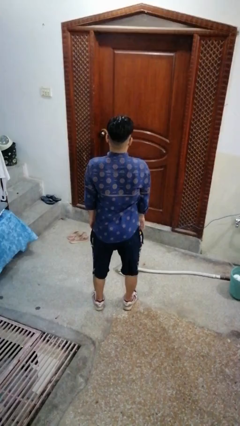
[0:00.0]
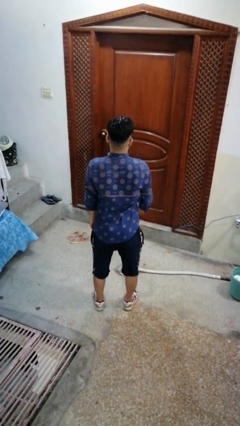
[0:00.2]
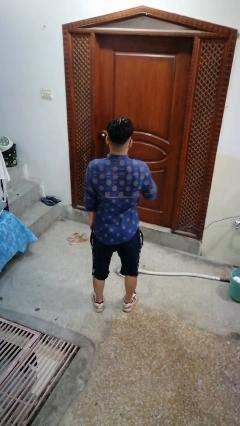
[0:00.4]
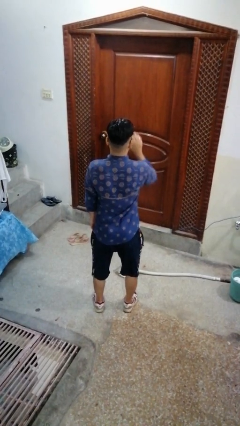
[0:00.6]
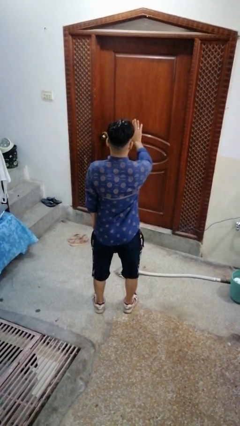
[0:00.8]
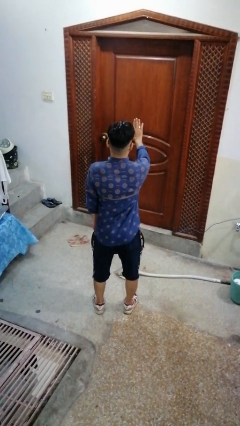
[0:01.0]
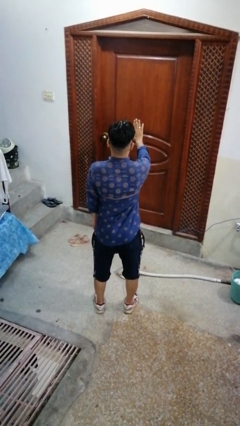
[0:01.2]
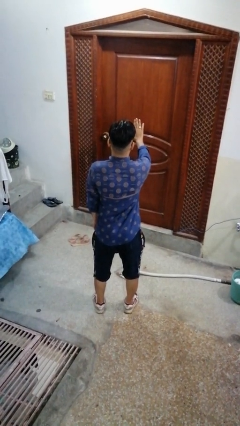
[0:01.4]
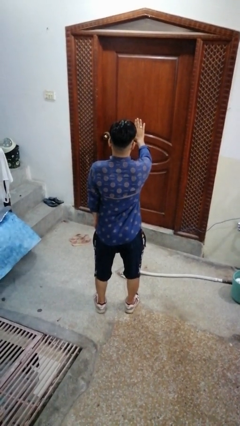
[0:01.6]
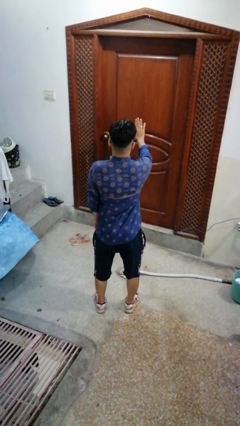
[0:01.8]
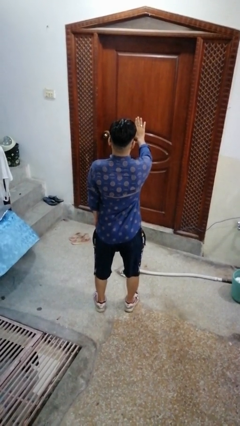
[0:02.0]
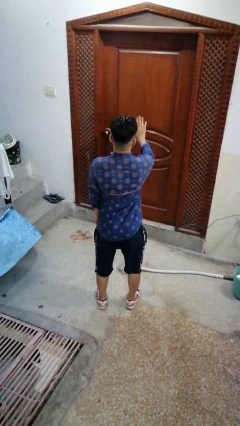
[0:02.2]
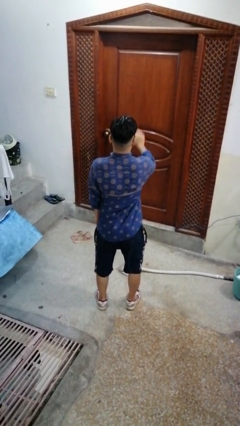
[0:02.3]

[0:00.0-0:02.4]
person gestures stop

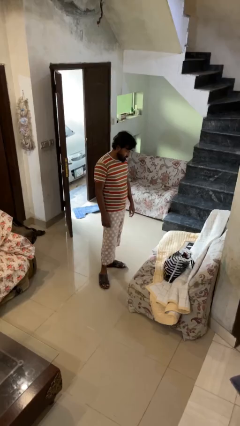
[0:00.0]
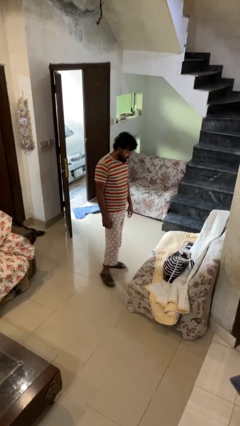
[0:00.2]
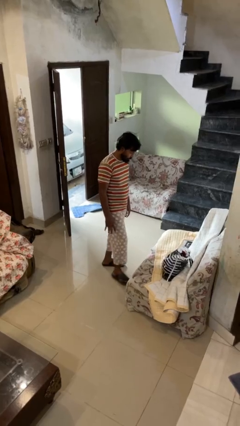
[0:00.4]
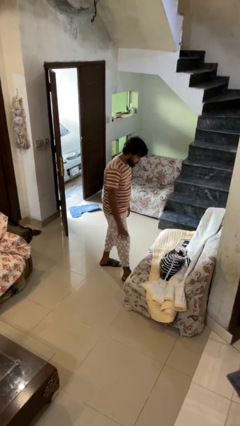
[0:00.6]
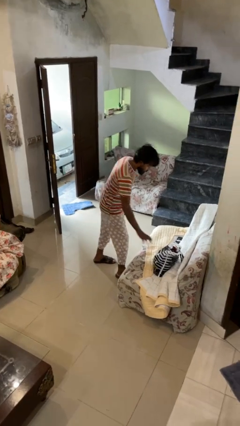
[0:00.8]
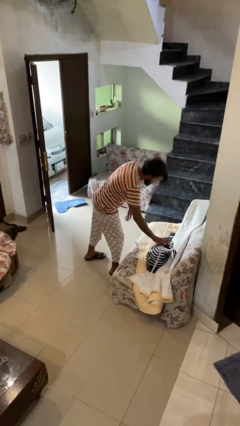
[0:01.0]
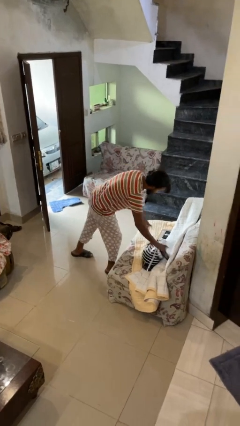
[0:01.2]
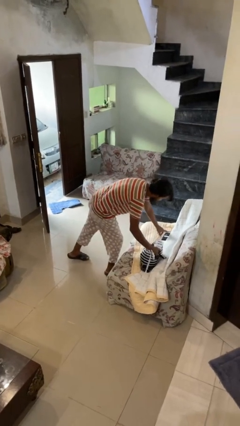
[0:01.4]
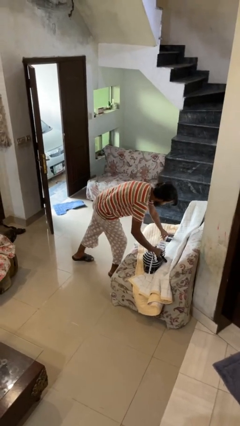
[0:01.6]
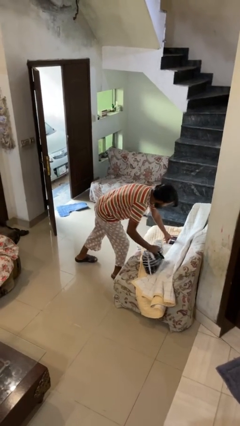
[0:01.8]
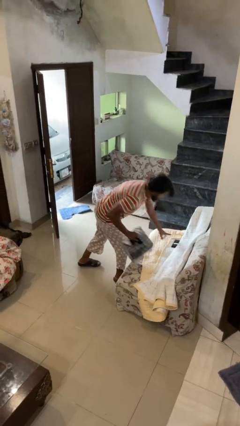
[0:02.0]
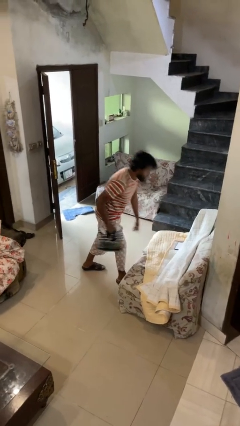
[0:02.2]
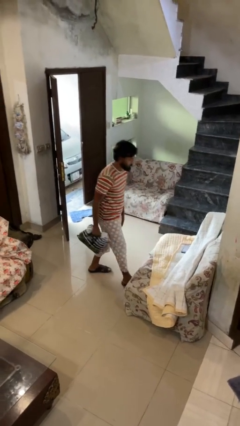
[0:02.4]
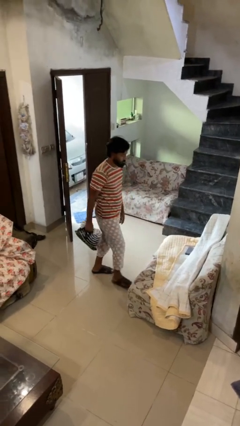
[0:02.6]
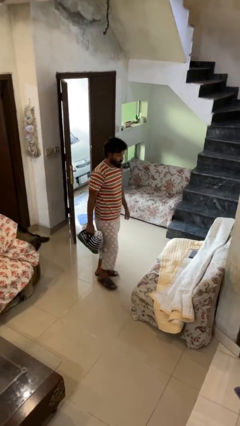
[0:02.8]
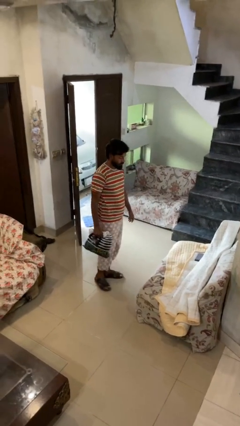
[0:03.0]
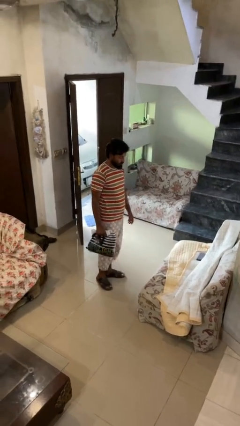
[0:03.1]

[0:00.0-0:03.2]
person picks up object from couch

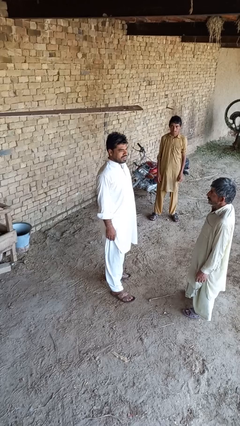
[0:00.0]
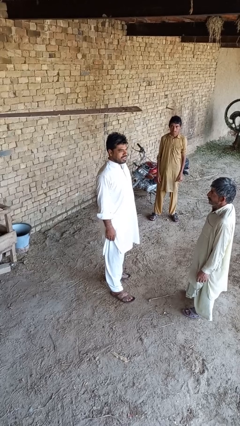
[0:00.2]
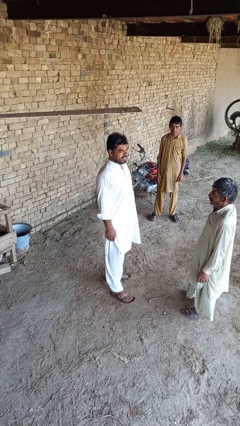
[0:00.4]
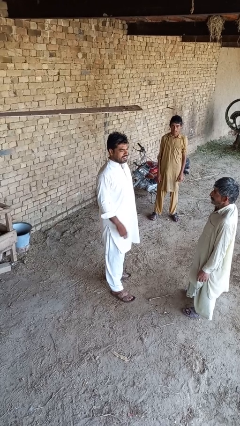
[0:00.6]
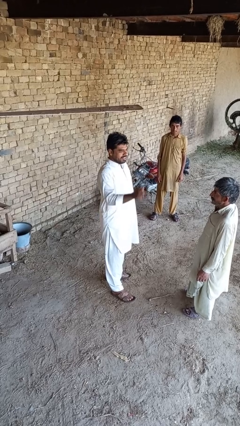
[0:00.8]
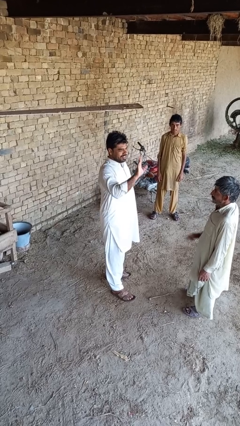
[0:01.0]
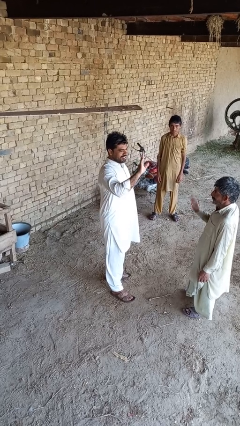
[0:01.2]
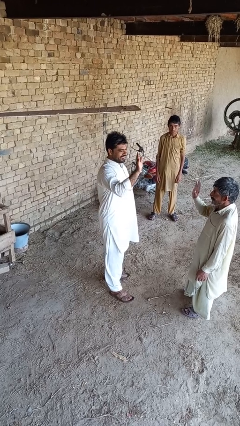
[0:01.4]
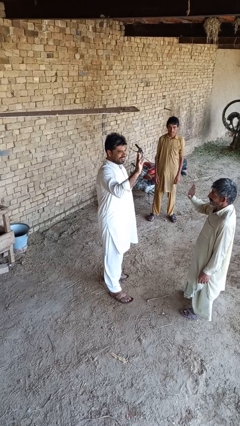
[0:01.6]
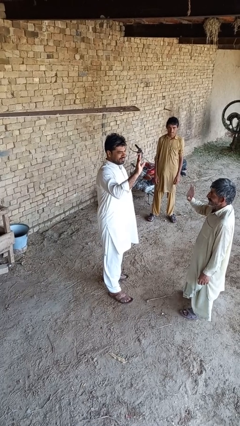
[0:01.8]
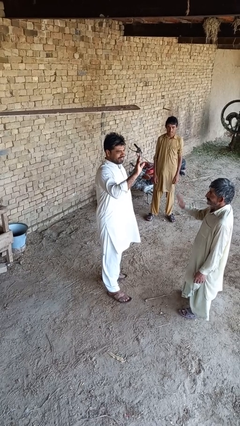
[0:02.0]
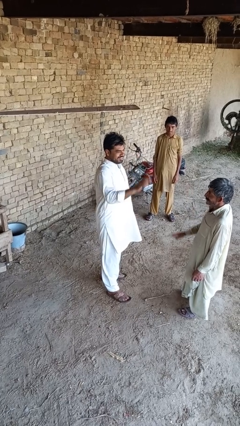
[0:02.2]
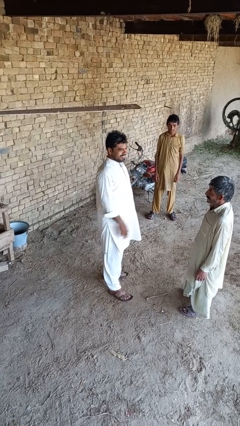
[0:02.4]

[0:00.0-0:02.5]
person waves at person

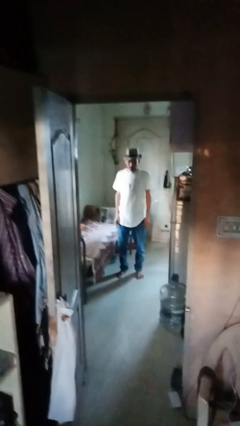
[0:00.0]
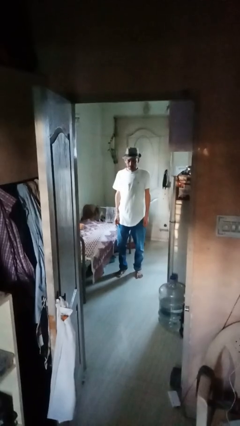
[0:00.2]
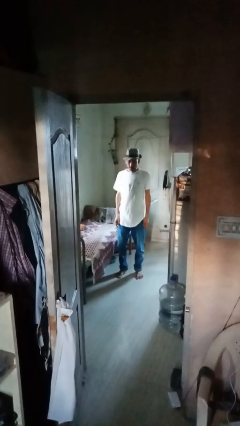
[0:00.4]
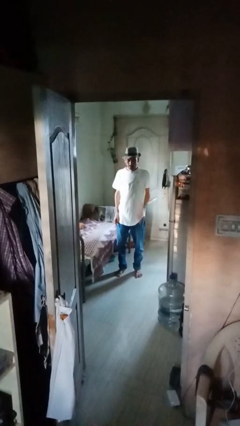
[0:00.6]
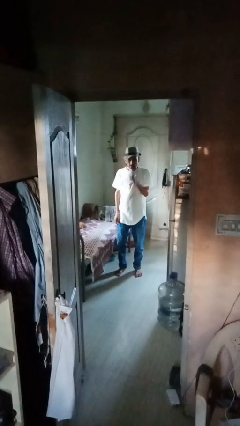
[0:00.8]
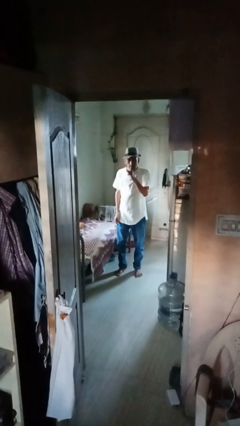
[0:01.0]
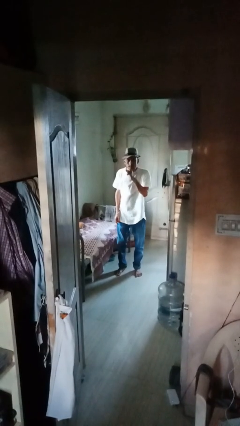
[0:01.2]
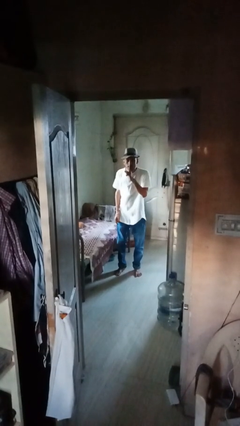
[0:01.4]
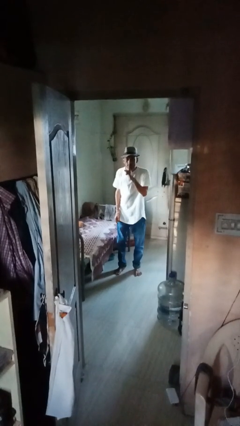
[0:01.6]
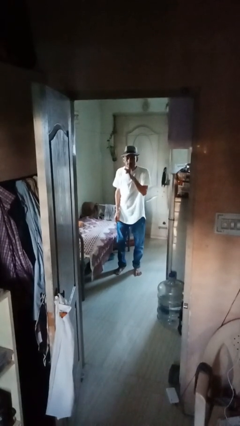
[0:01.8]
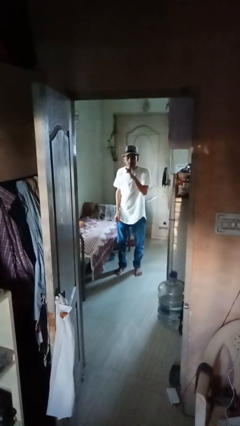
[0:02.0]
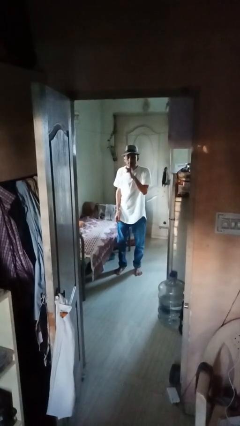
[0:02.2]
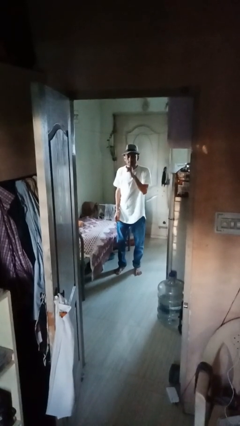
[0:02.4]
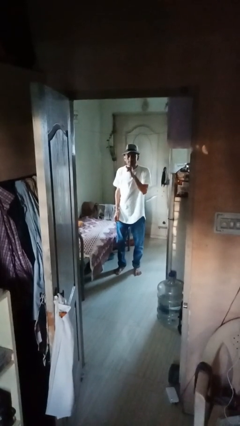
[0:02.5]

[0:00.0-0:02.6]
person gestures be quiet

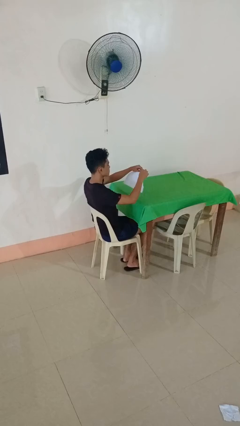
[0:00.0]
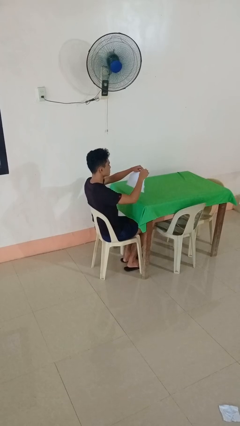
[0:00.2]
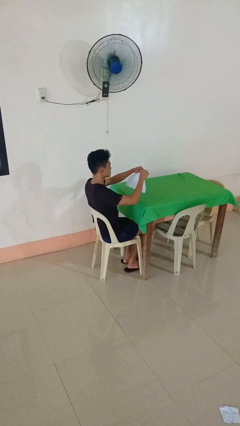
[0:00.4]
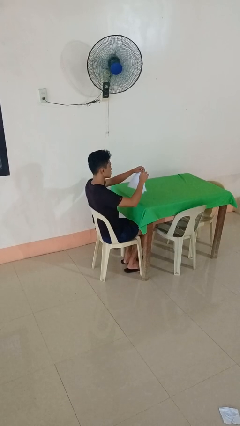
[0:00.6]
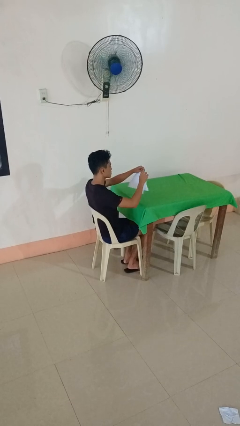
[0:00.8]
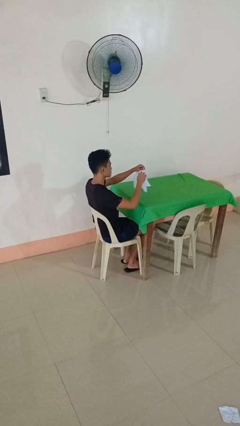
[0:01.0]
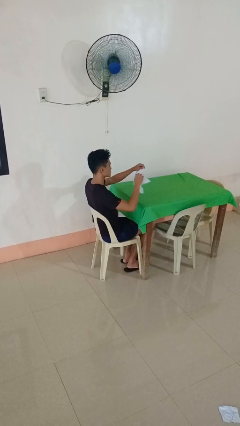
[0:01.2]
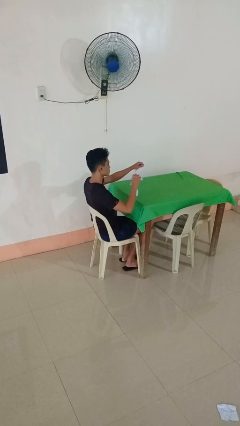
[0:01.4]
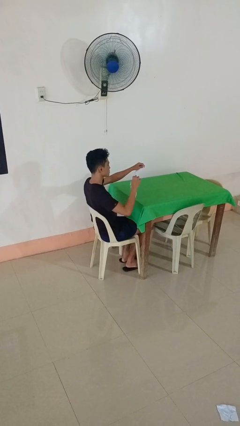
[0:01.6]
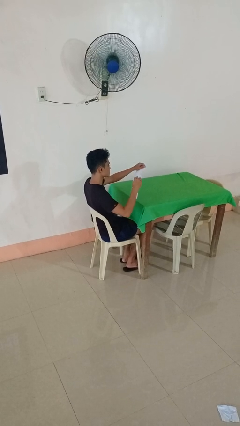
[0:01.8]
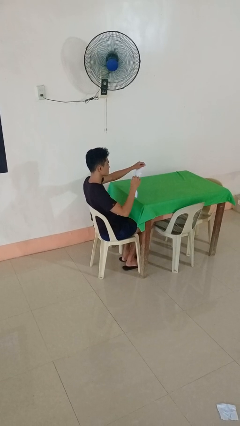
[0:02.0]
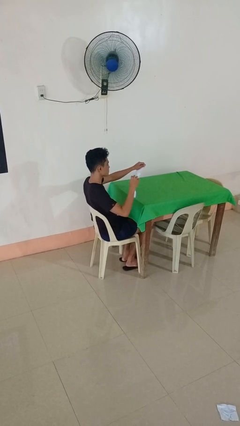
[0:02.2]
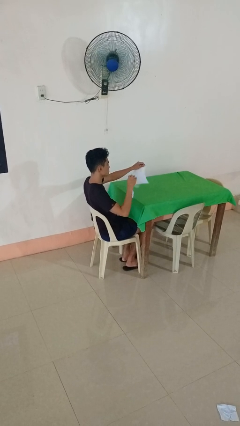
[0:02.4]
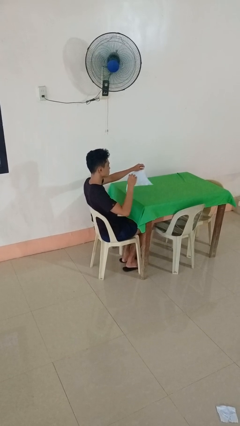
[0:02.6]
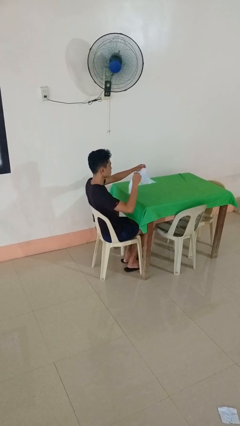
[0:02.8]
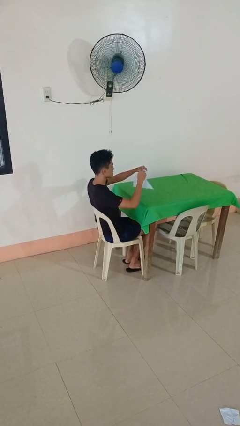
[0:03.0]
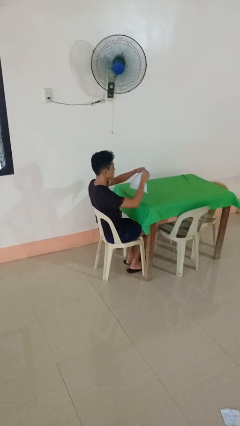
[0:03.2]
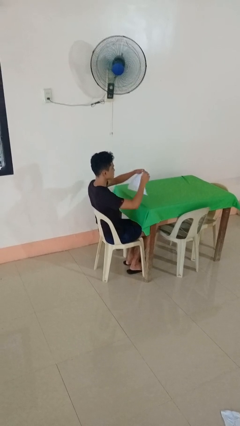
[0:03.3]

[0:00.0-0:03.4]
person tears paper

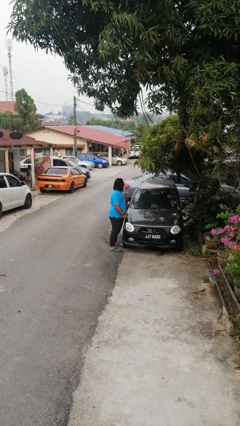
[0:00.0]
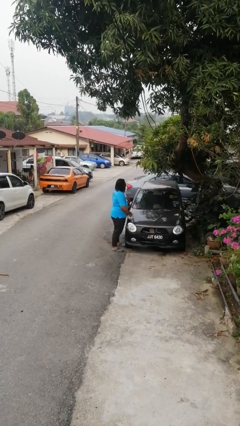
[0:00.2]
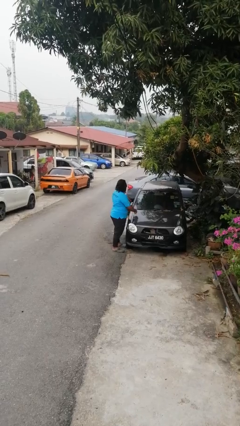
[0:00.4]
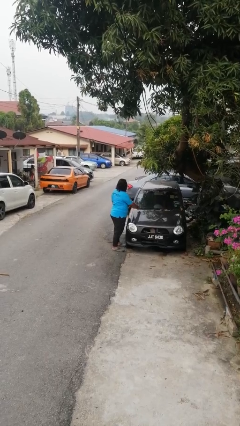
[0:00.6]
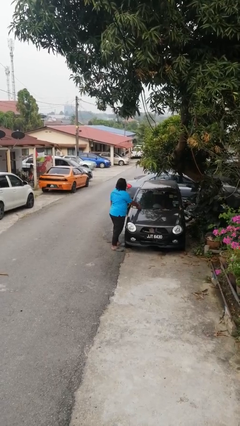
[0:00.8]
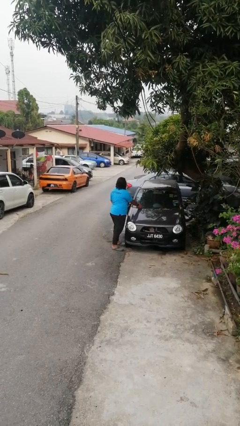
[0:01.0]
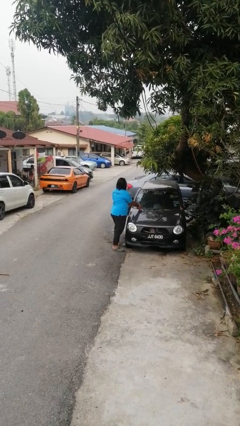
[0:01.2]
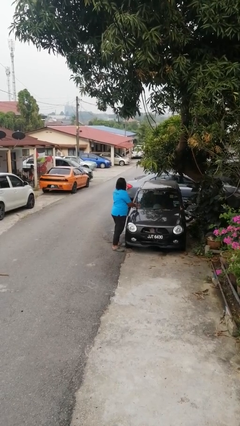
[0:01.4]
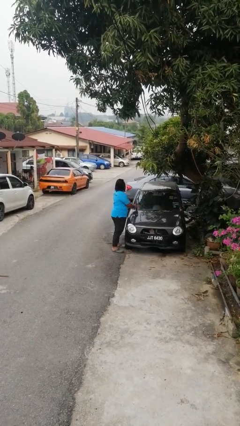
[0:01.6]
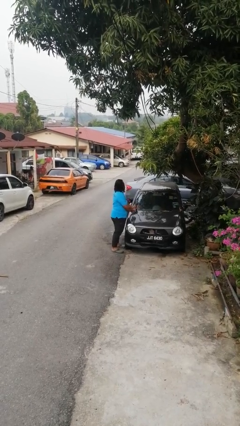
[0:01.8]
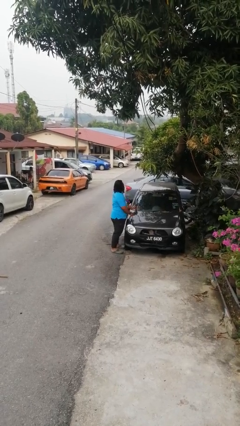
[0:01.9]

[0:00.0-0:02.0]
person flips up car wipers

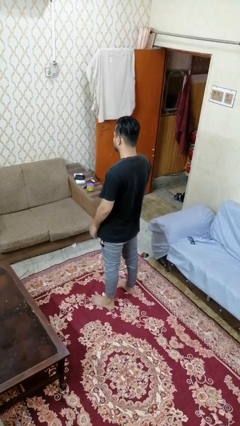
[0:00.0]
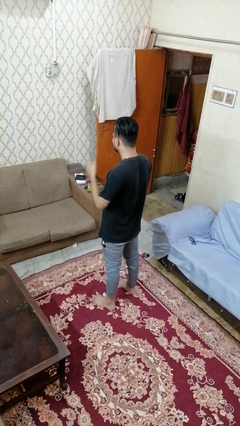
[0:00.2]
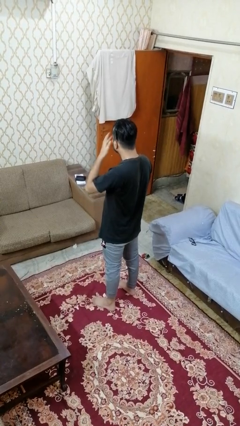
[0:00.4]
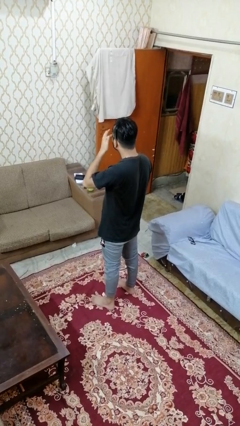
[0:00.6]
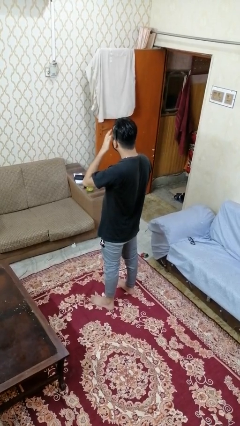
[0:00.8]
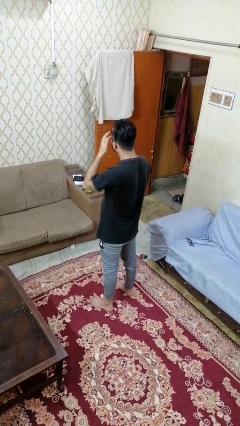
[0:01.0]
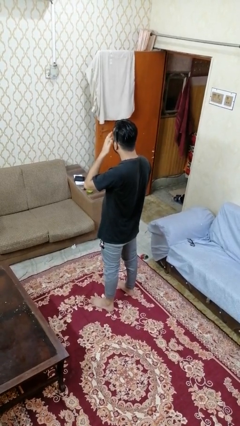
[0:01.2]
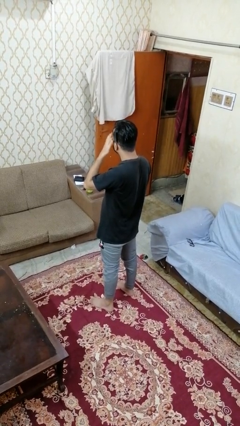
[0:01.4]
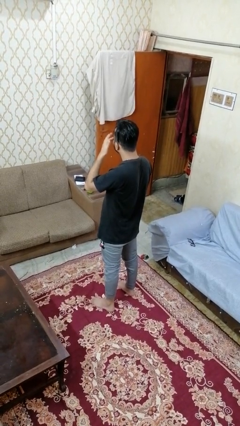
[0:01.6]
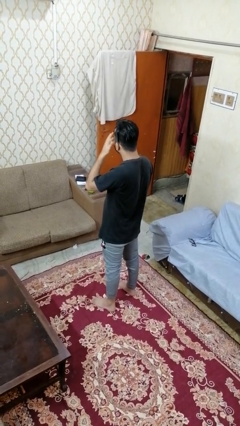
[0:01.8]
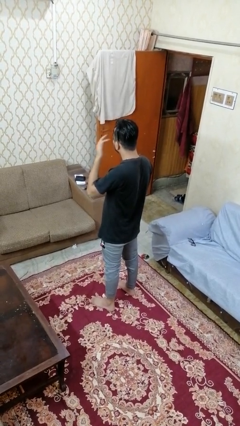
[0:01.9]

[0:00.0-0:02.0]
person rubs eyes
